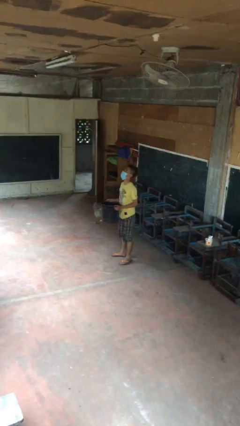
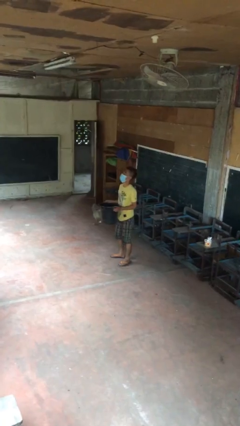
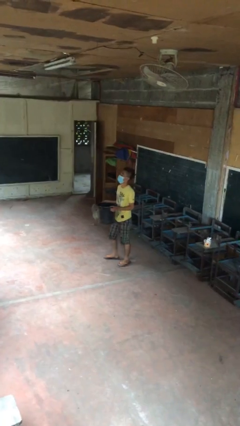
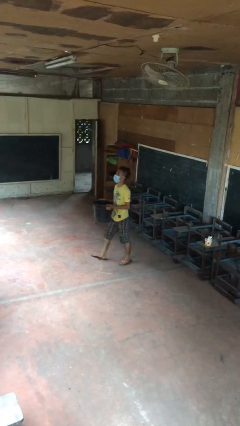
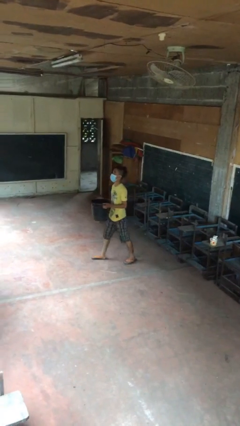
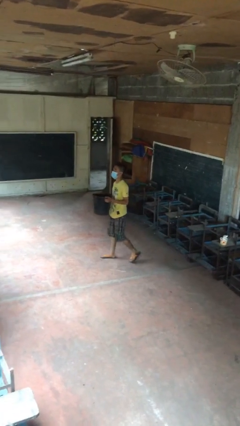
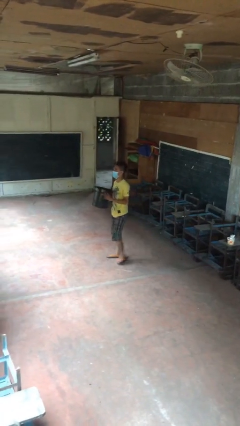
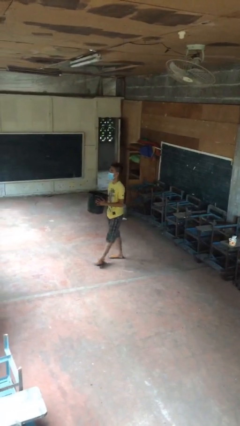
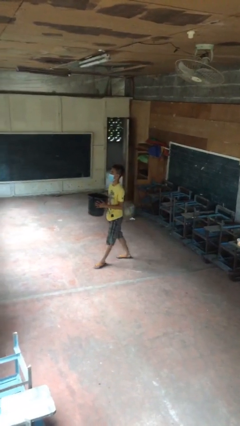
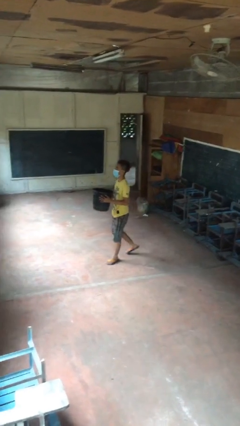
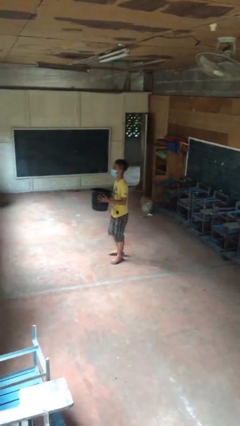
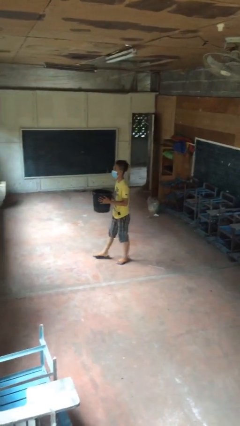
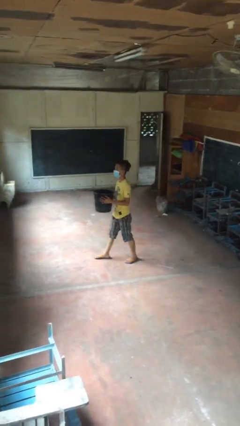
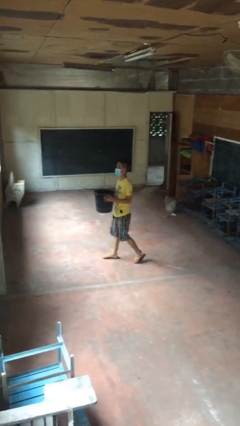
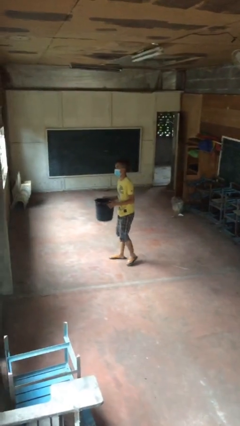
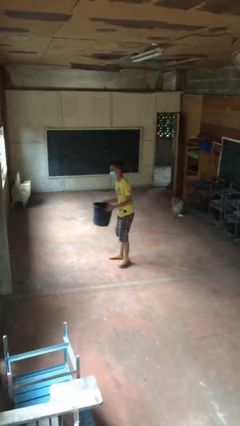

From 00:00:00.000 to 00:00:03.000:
person carries heavy object

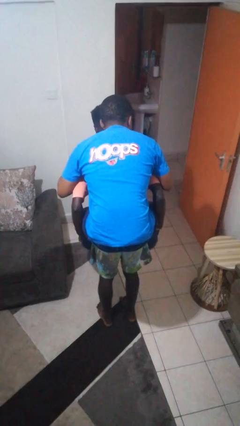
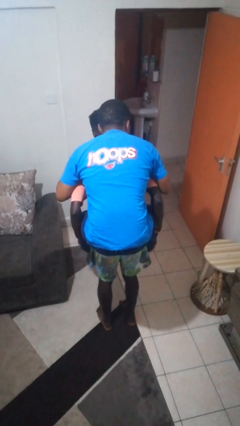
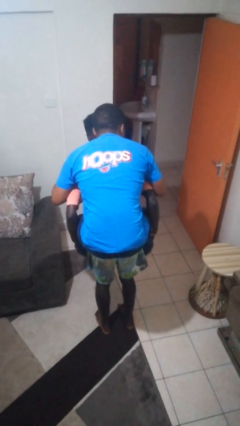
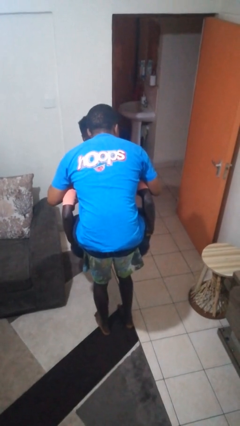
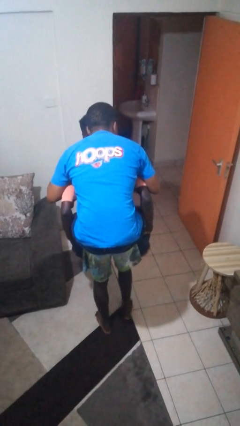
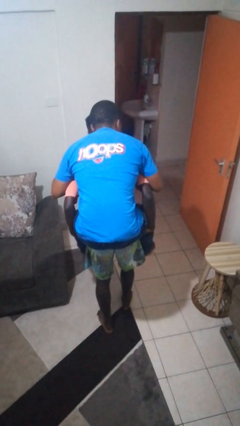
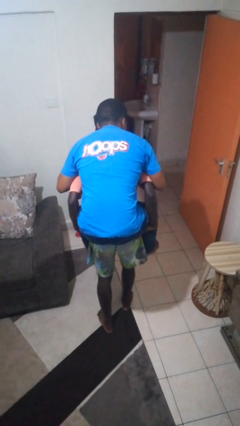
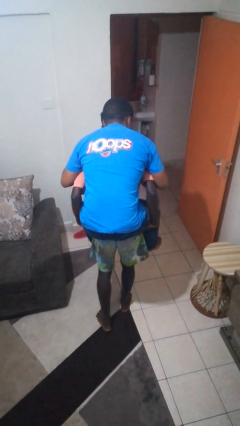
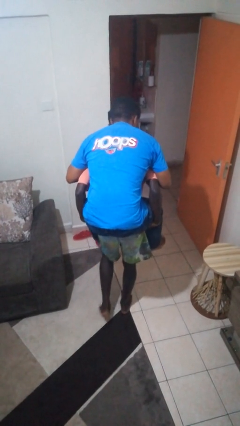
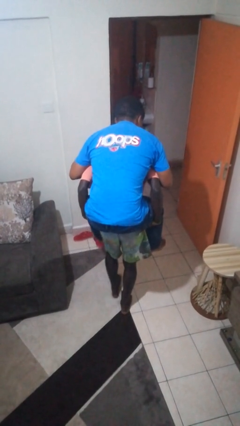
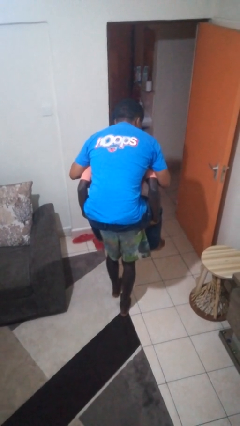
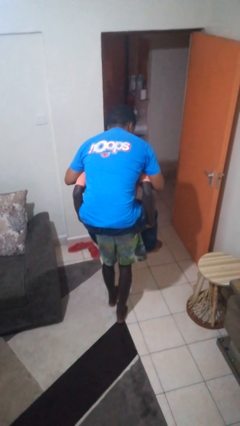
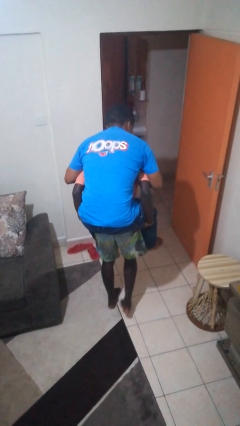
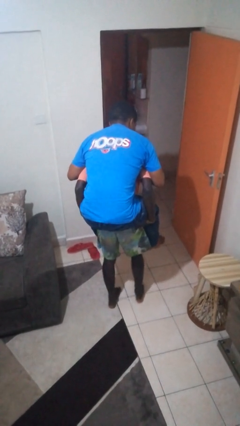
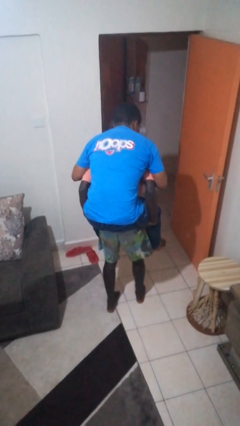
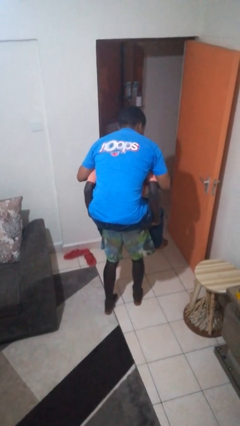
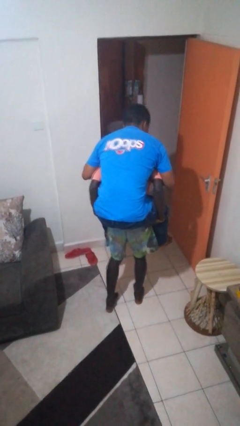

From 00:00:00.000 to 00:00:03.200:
person carries person on back

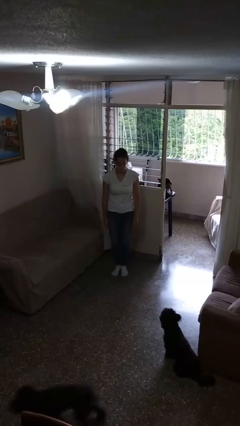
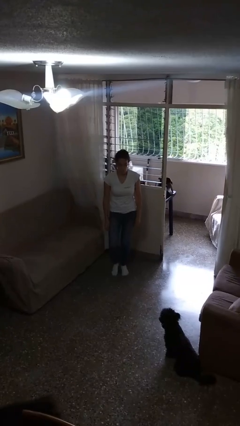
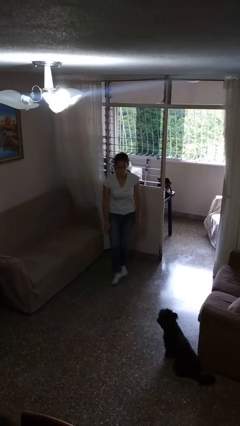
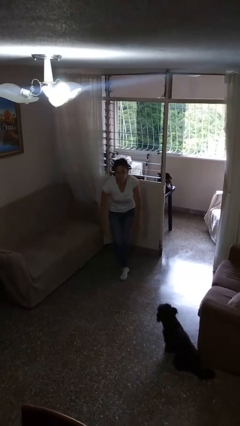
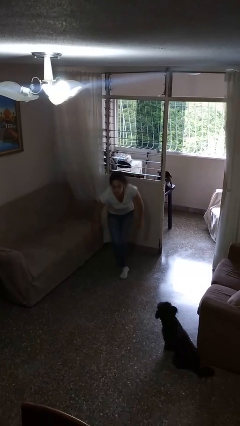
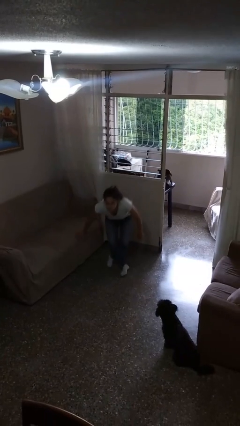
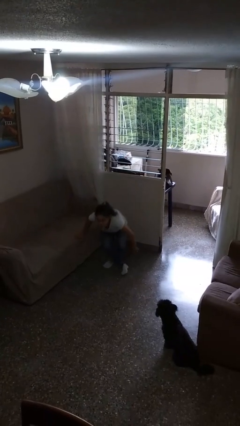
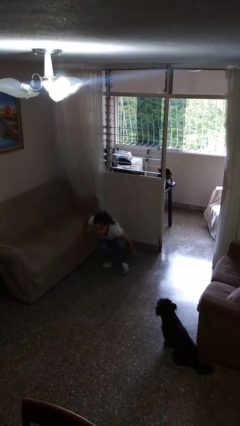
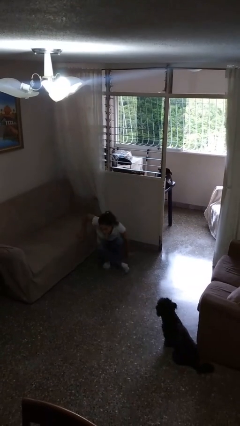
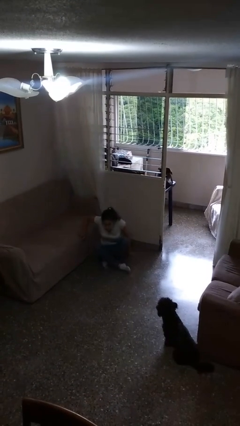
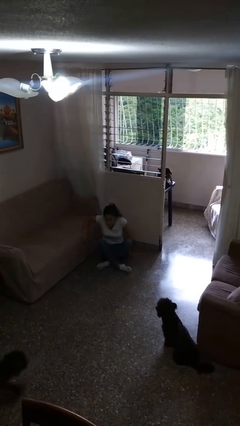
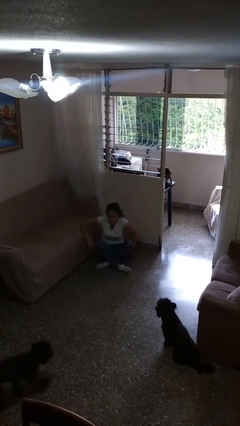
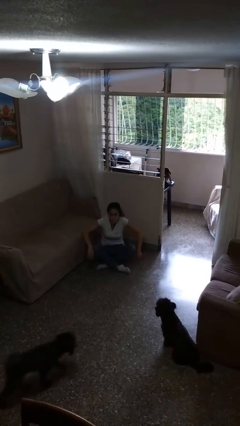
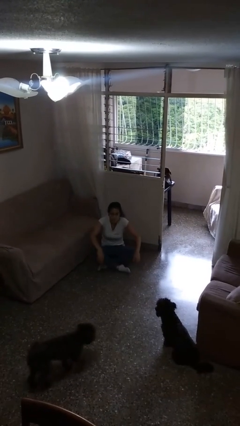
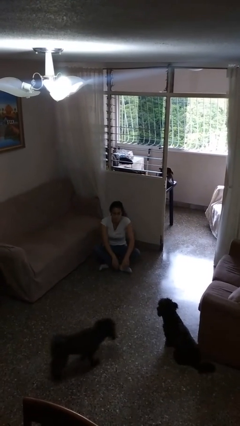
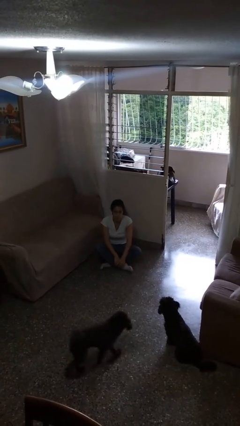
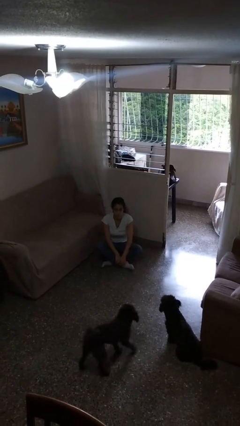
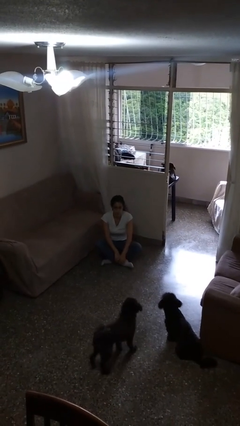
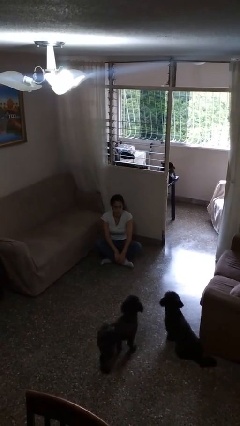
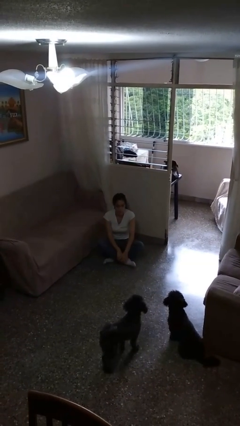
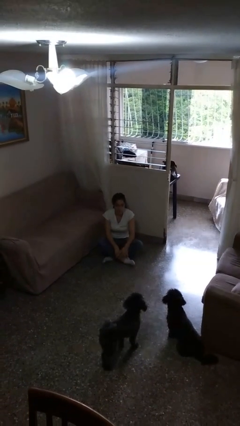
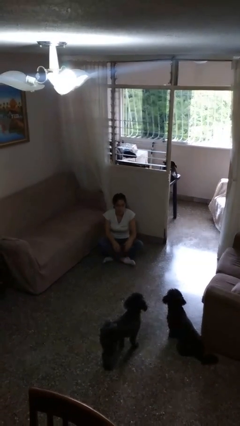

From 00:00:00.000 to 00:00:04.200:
person sits crisscross

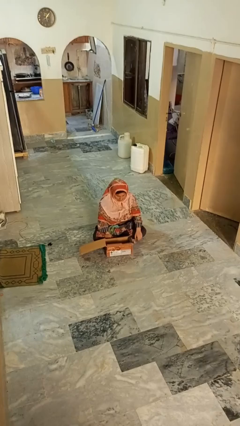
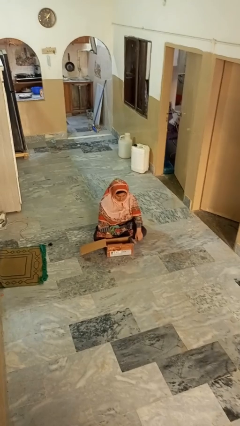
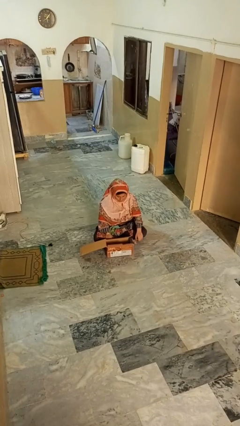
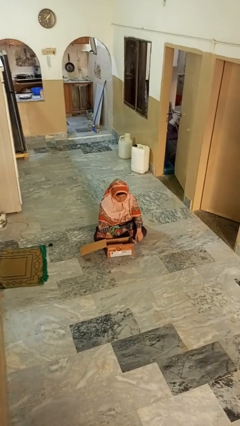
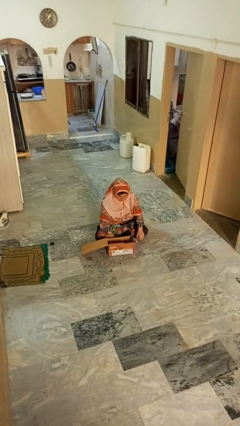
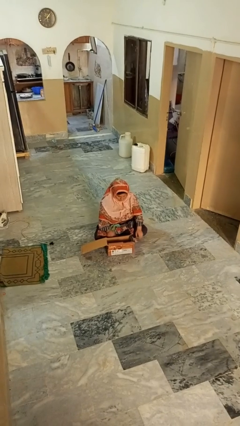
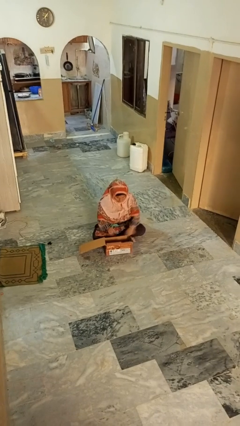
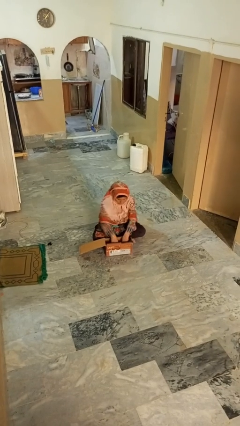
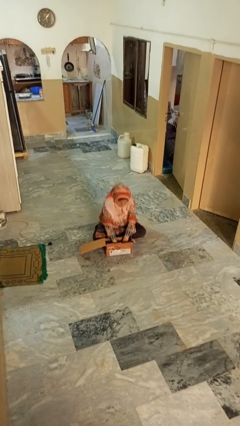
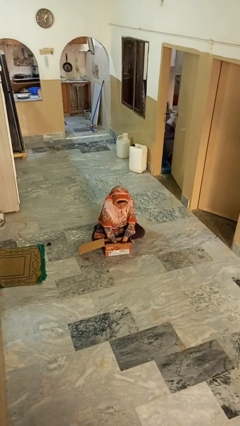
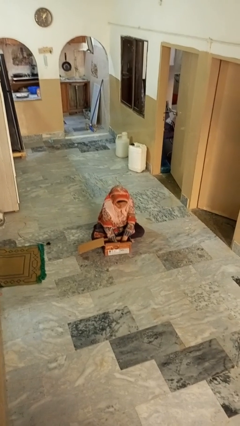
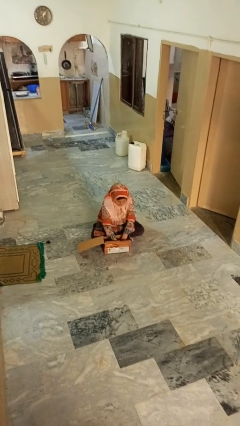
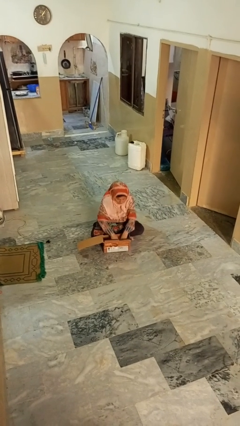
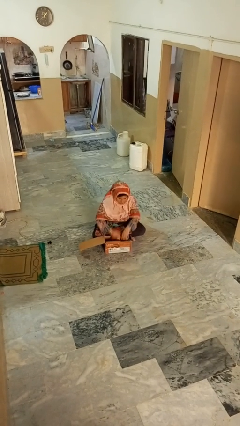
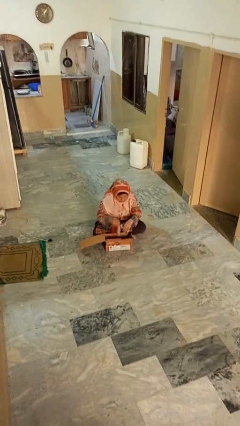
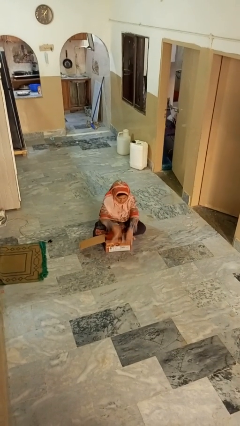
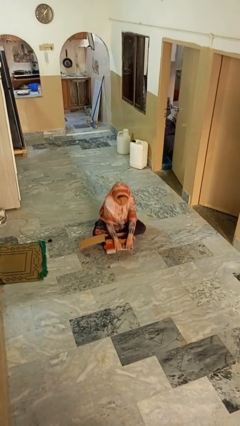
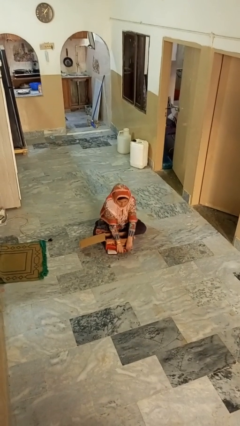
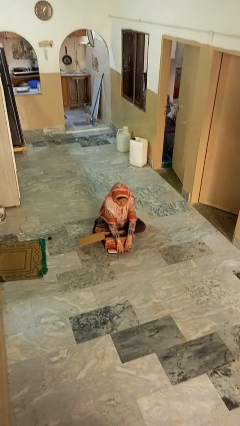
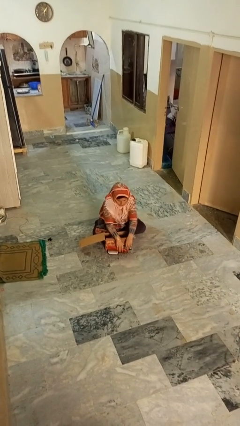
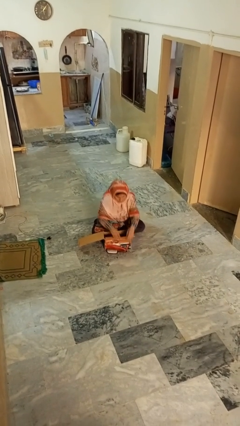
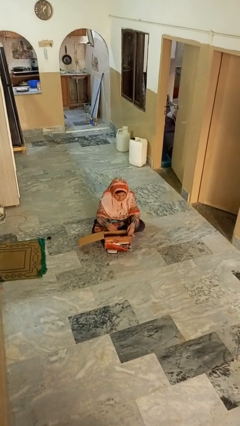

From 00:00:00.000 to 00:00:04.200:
person takes object from box

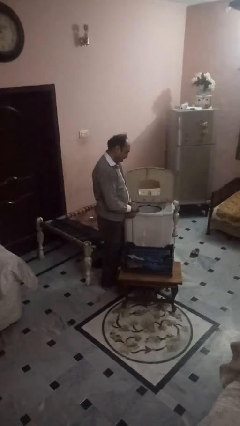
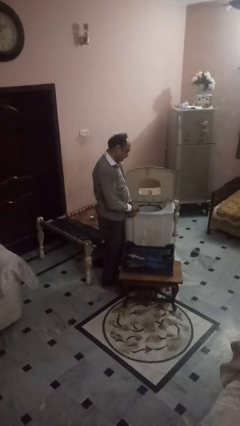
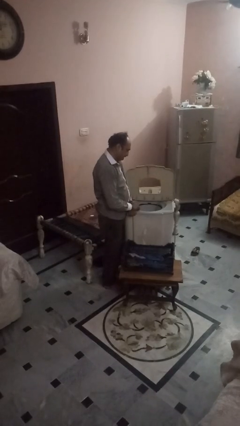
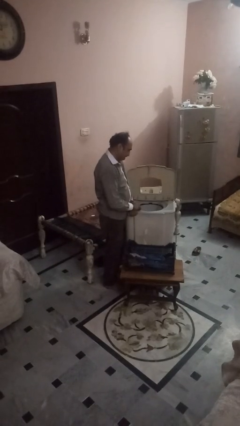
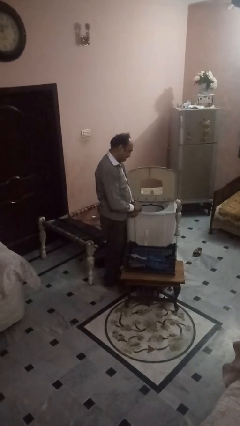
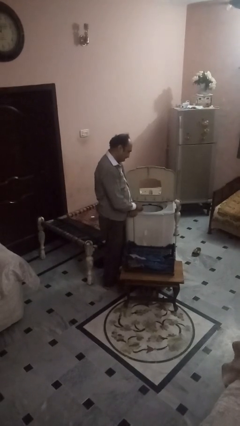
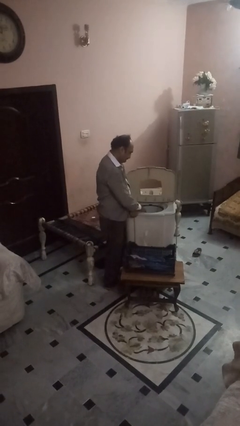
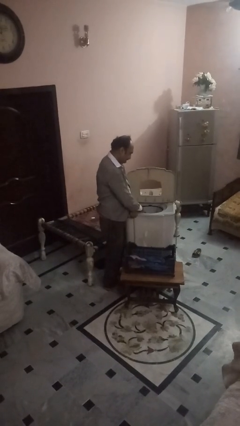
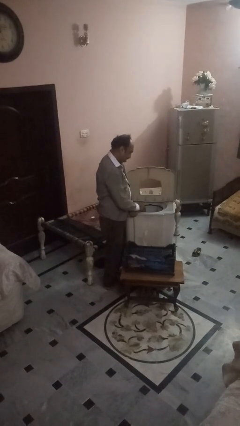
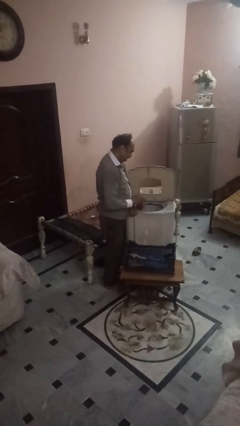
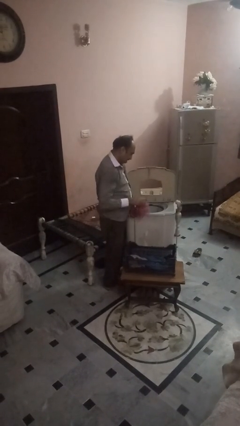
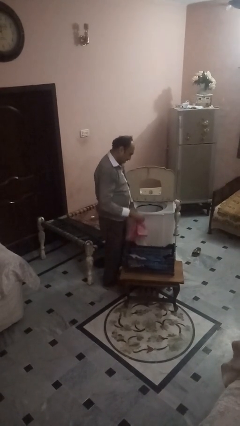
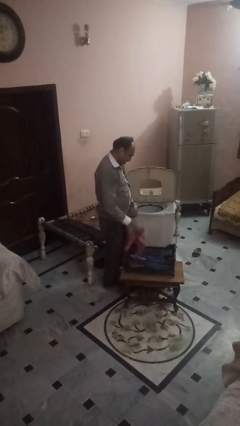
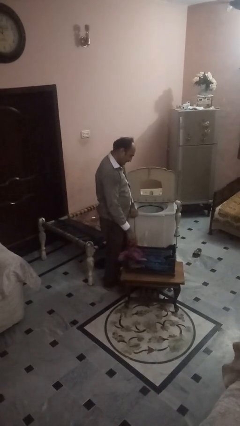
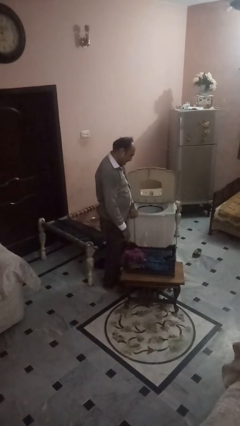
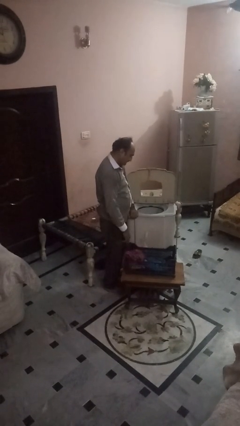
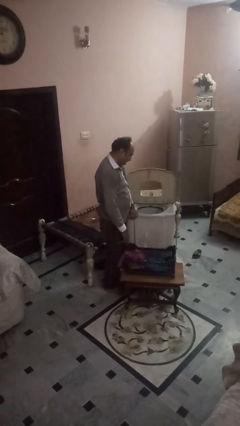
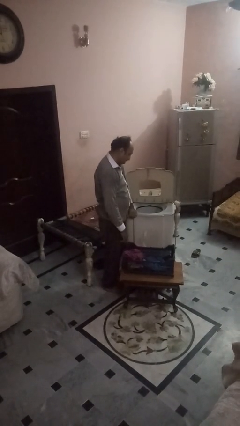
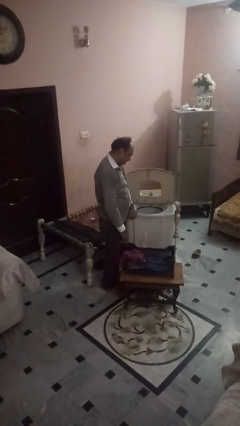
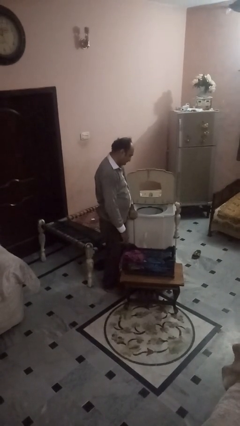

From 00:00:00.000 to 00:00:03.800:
person unloads dryer
